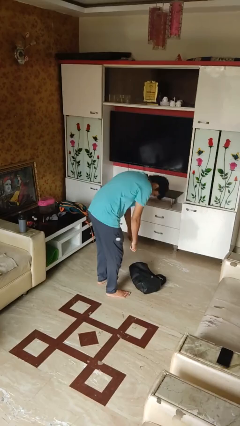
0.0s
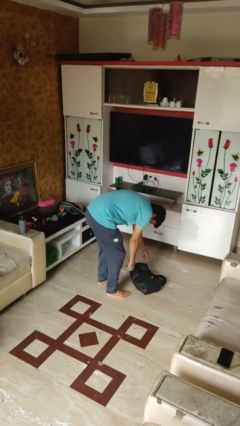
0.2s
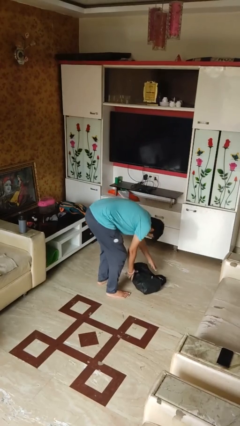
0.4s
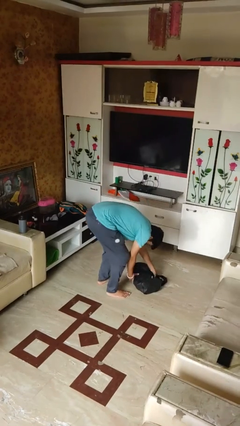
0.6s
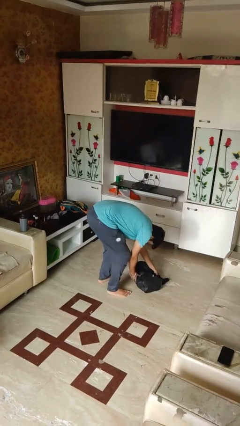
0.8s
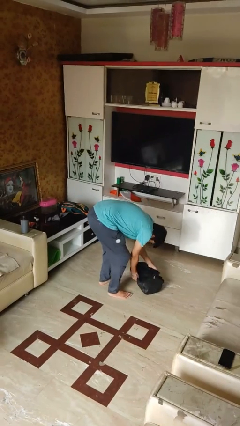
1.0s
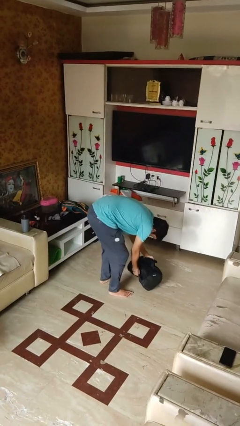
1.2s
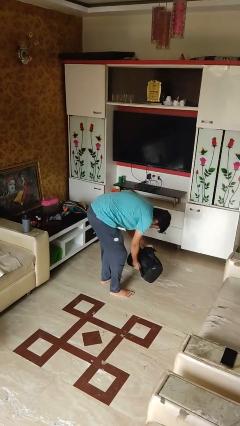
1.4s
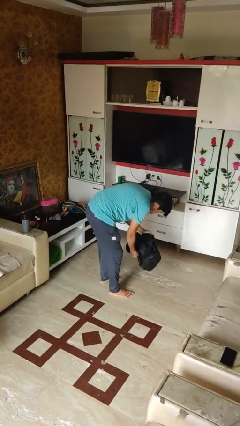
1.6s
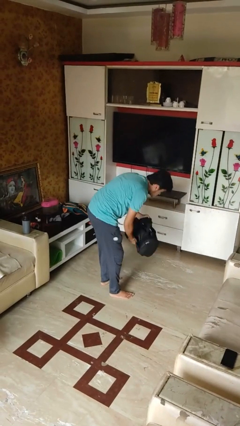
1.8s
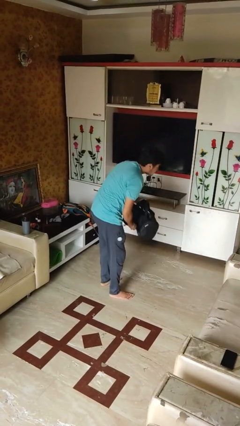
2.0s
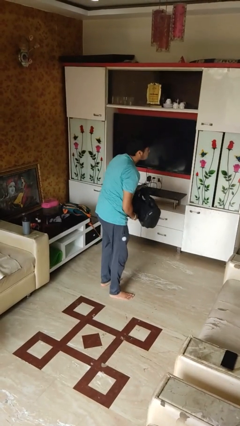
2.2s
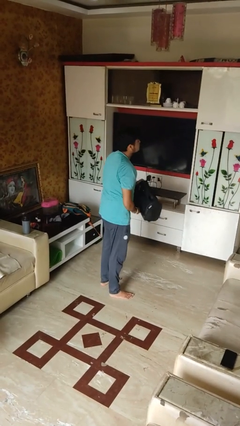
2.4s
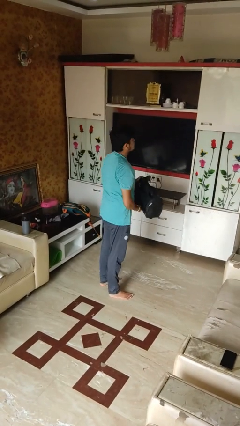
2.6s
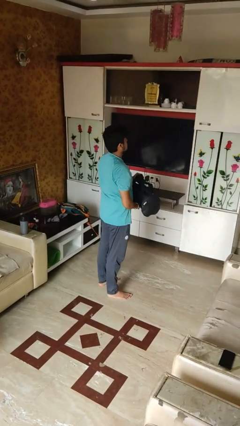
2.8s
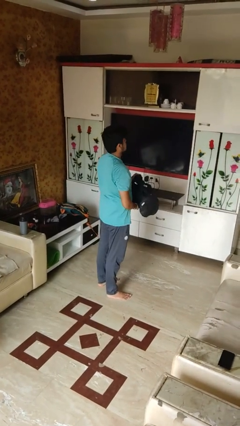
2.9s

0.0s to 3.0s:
person picks up object from floor

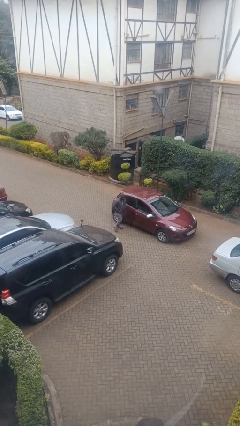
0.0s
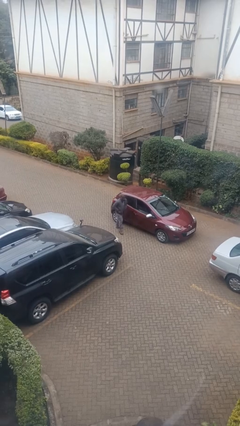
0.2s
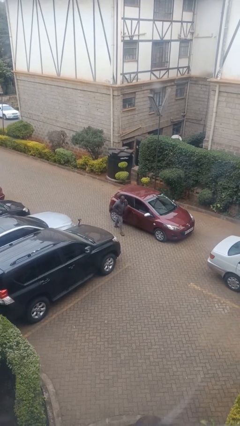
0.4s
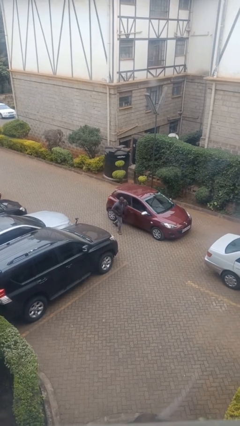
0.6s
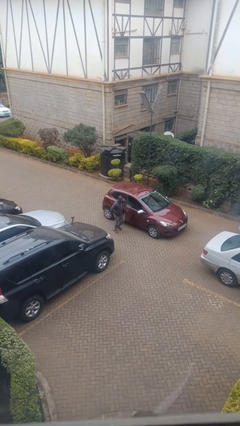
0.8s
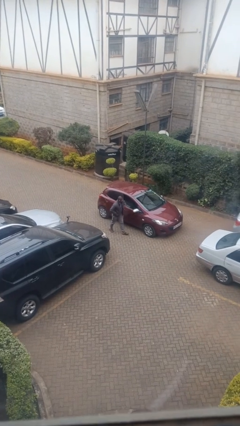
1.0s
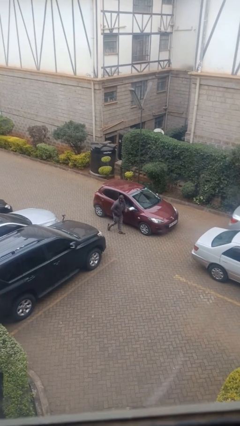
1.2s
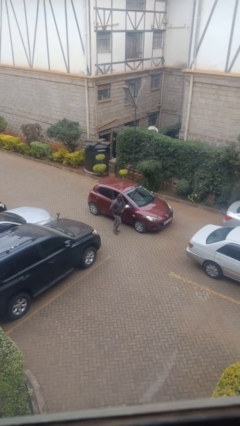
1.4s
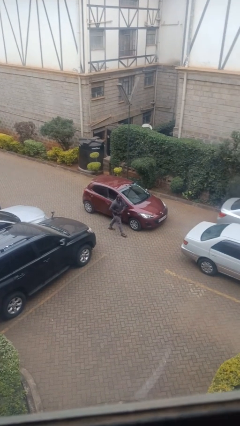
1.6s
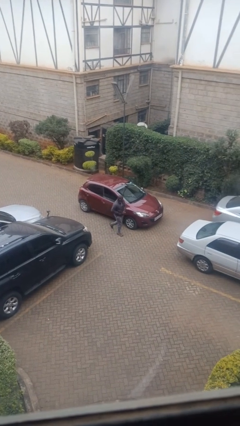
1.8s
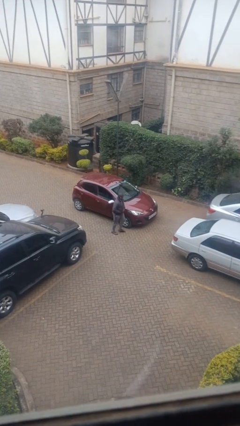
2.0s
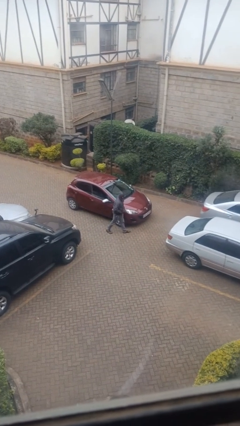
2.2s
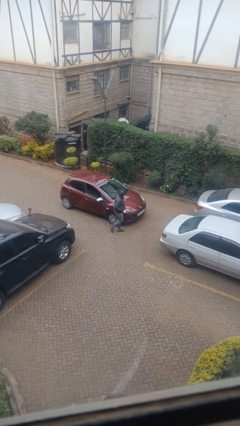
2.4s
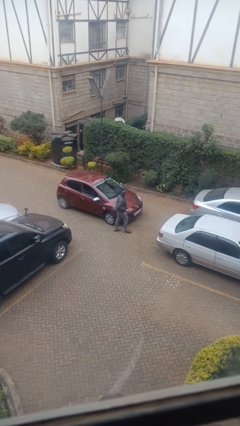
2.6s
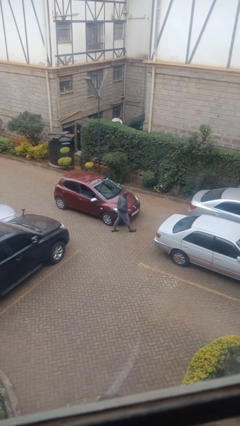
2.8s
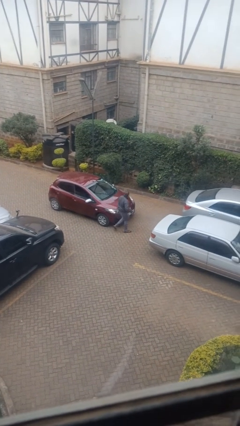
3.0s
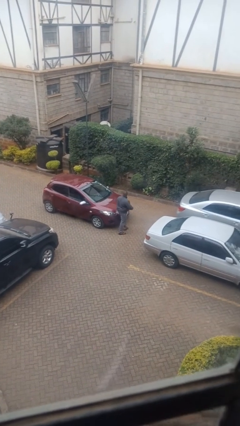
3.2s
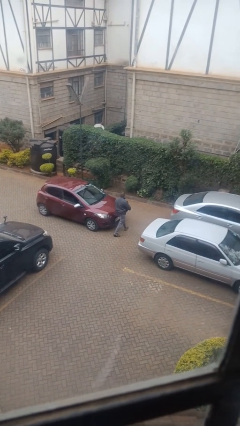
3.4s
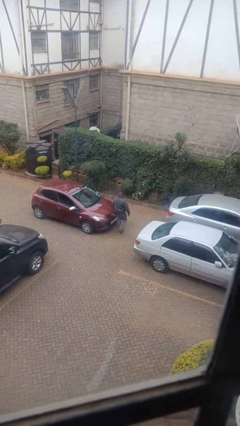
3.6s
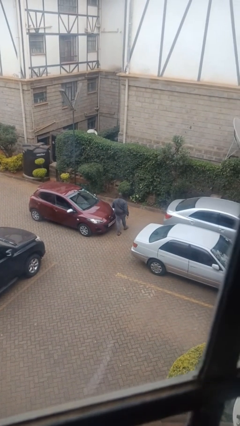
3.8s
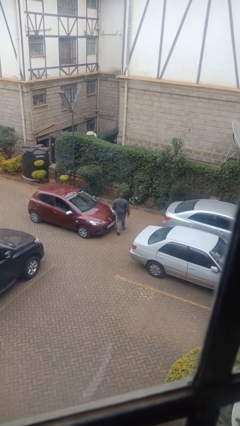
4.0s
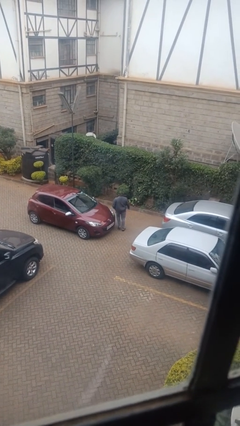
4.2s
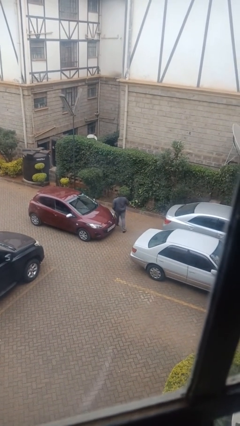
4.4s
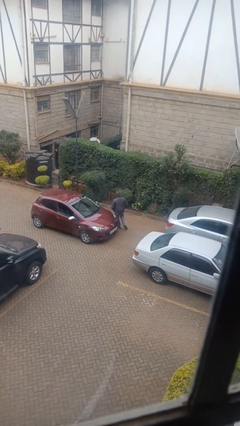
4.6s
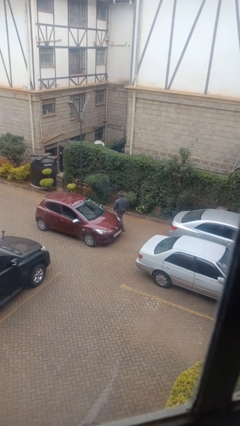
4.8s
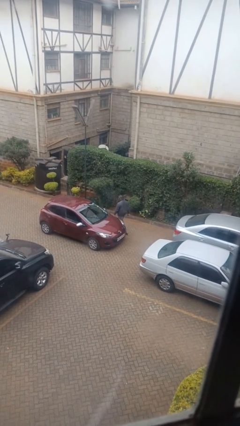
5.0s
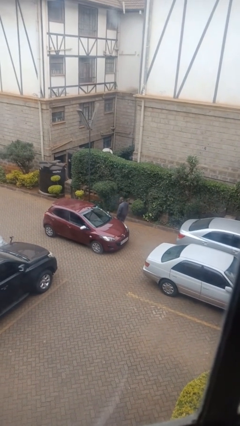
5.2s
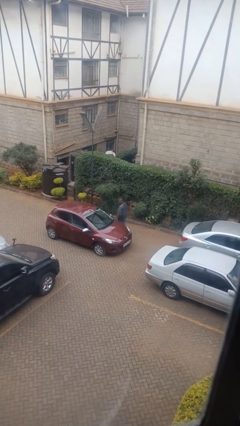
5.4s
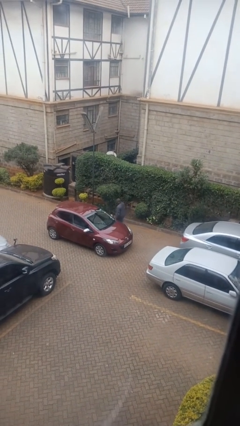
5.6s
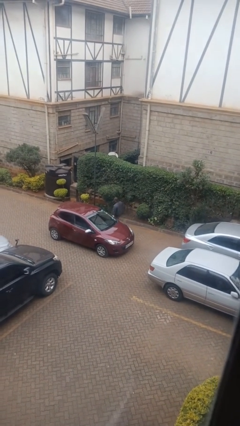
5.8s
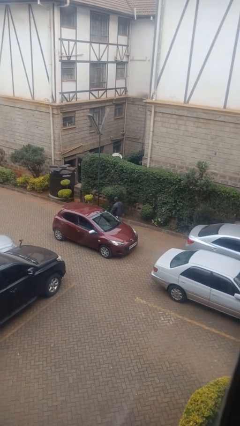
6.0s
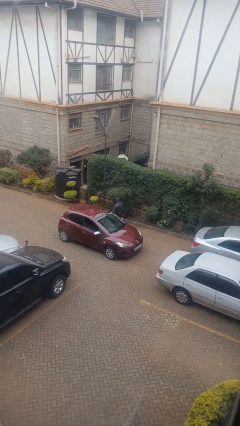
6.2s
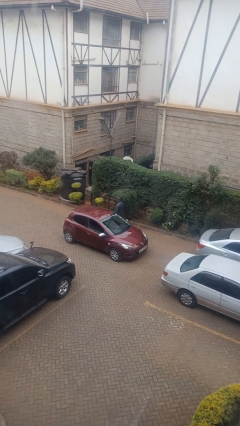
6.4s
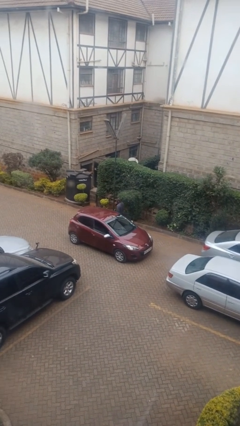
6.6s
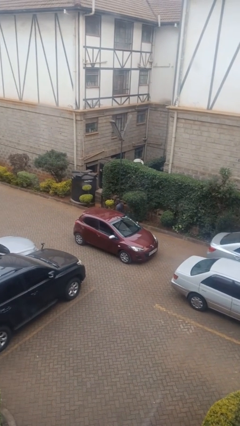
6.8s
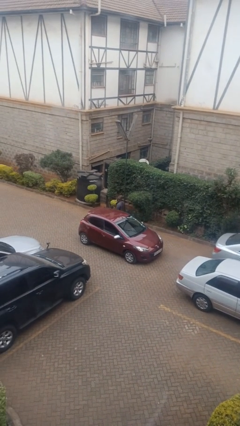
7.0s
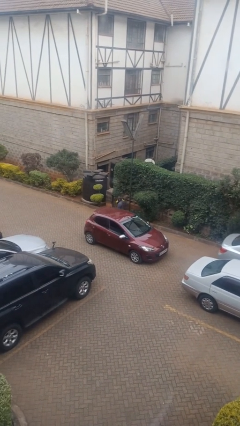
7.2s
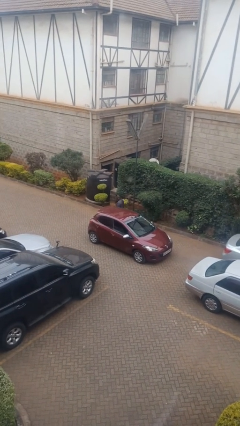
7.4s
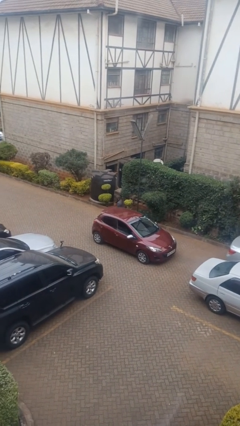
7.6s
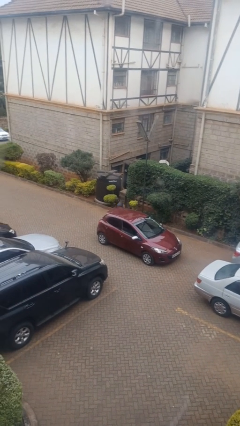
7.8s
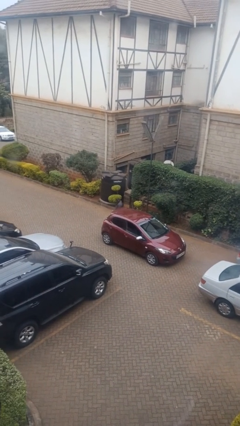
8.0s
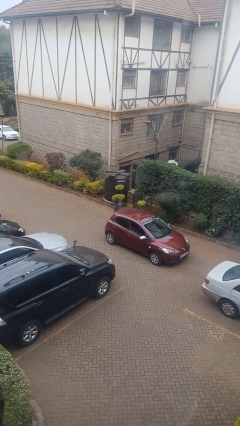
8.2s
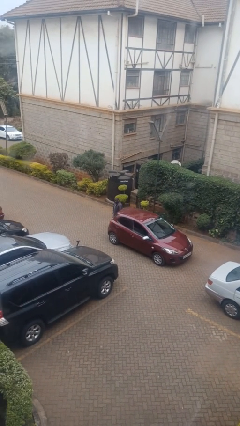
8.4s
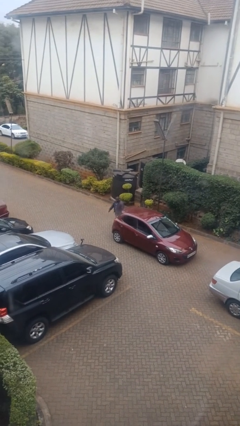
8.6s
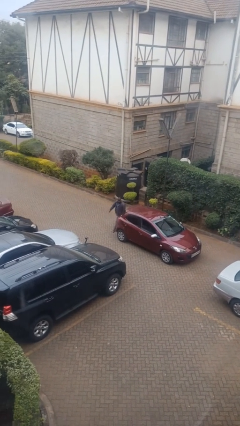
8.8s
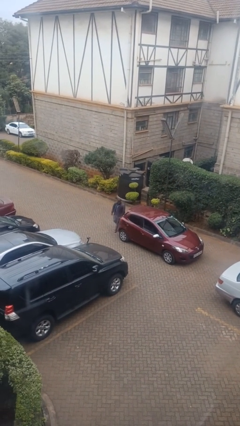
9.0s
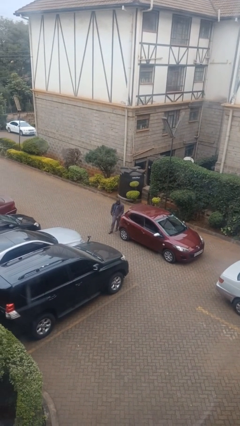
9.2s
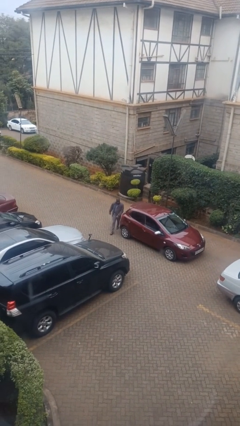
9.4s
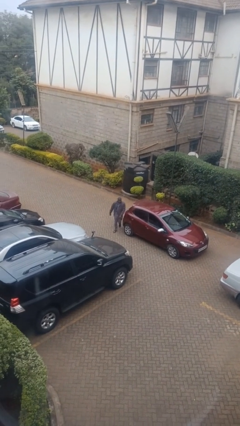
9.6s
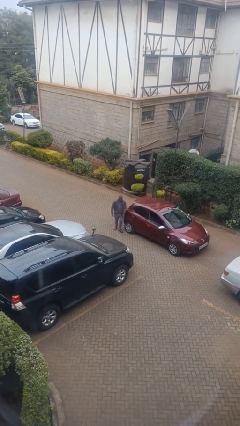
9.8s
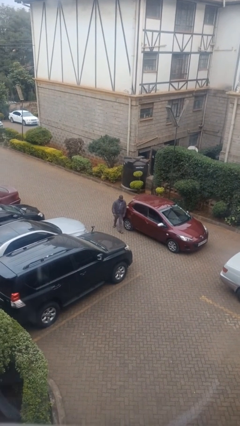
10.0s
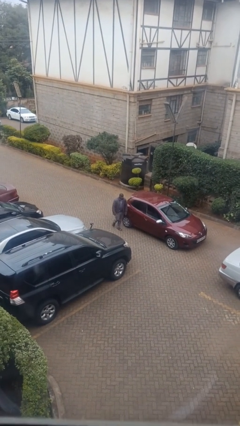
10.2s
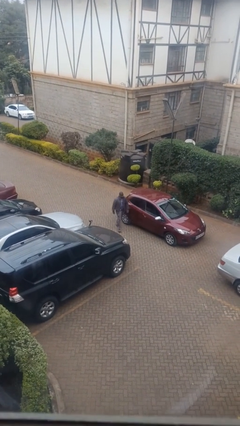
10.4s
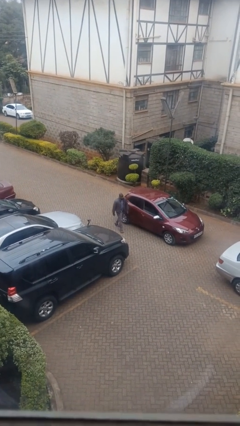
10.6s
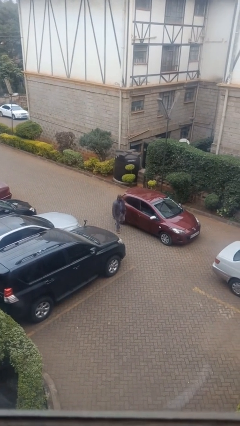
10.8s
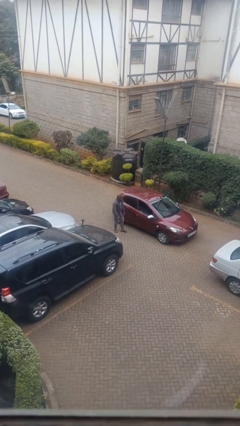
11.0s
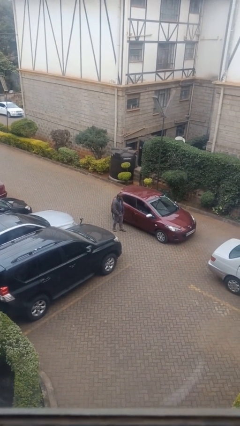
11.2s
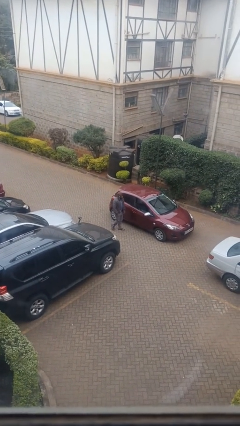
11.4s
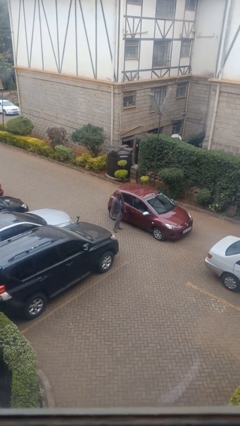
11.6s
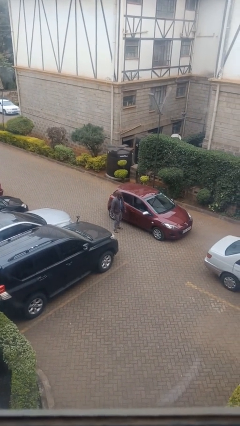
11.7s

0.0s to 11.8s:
person walks around car

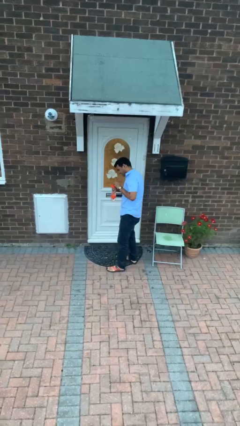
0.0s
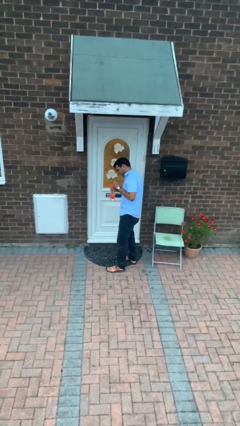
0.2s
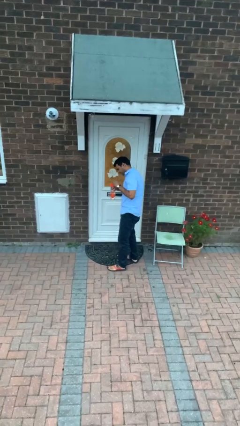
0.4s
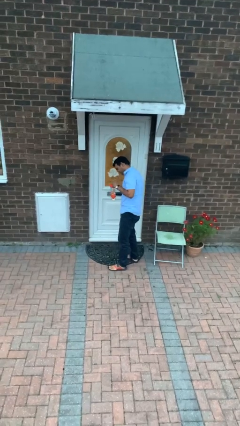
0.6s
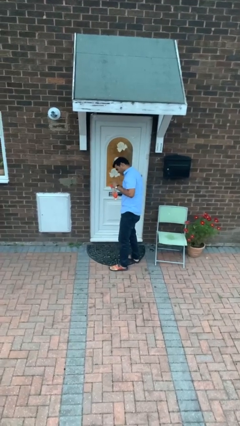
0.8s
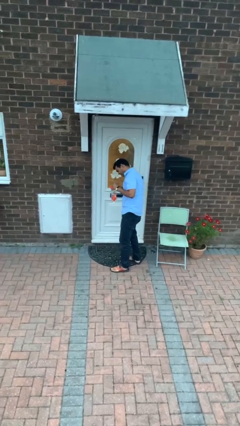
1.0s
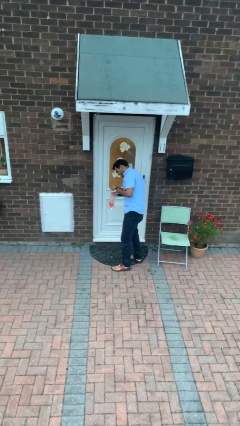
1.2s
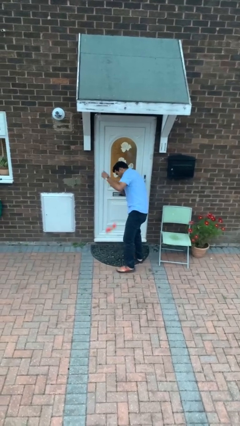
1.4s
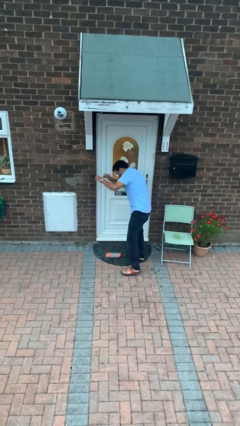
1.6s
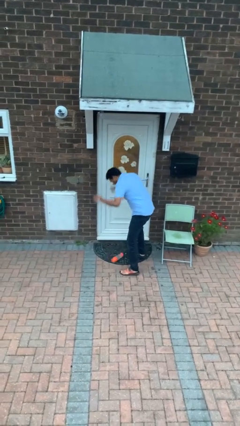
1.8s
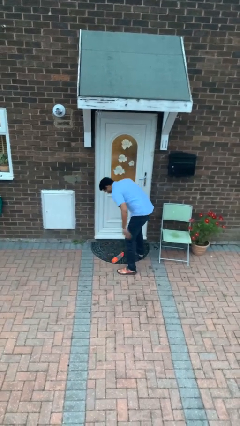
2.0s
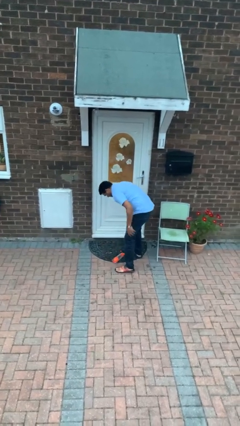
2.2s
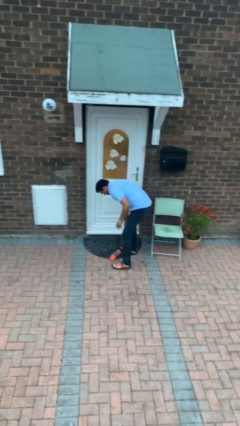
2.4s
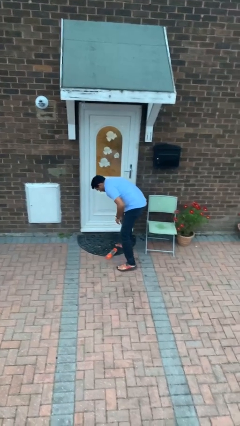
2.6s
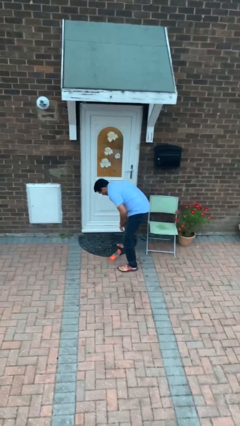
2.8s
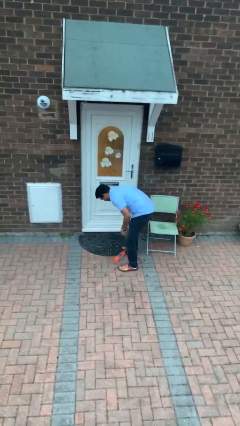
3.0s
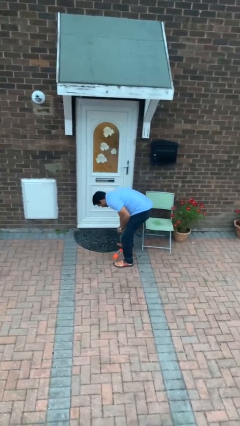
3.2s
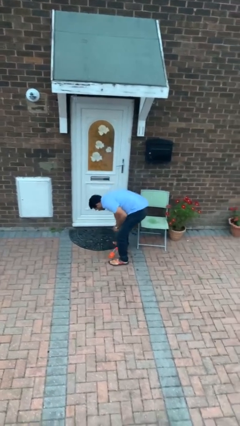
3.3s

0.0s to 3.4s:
person drops object
